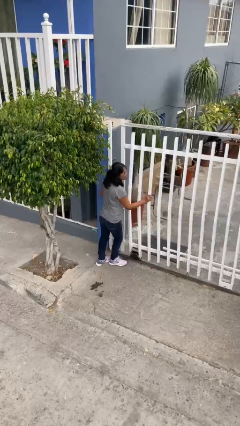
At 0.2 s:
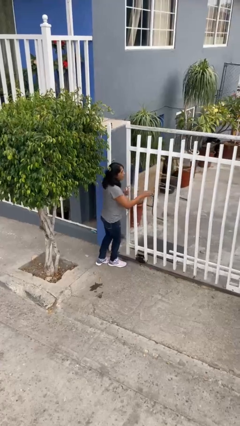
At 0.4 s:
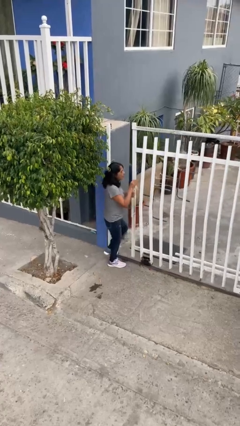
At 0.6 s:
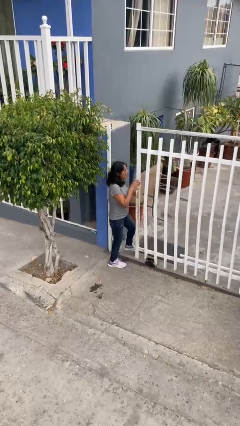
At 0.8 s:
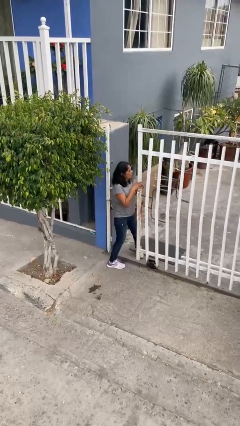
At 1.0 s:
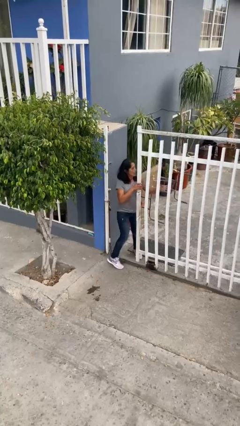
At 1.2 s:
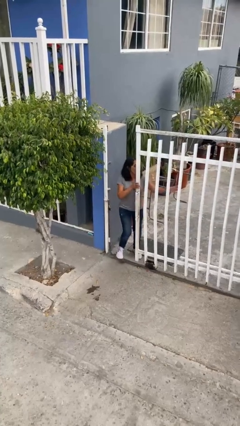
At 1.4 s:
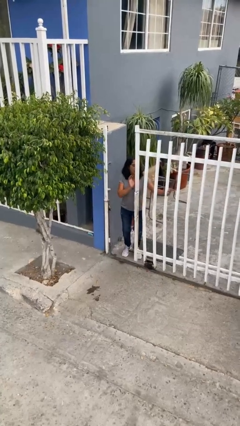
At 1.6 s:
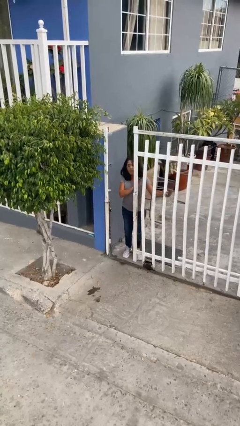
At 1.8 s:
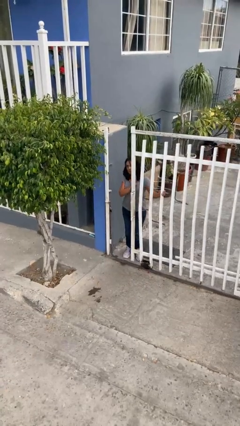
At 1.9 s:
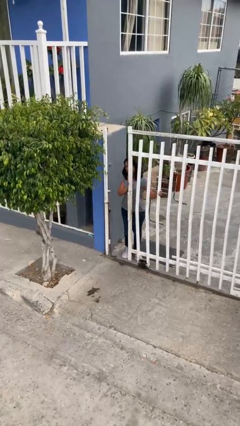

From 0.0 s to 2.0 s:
person opens facility door

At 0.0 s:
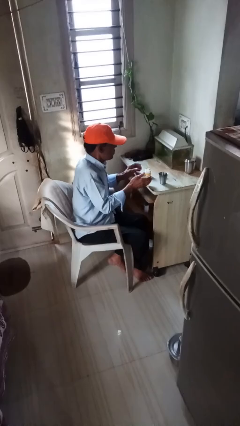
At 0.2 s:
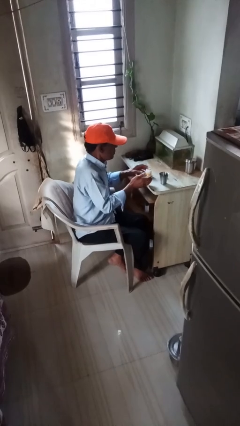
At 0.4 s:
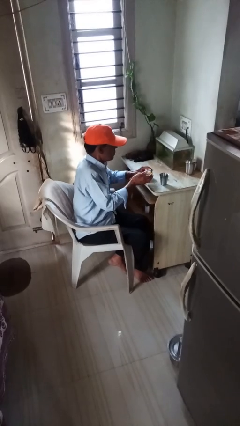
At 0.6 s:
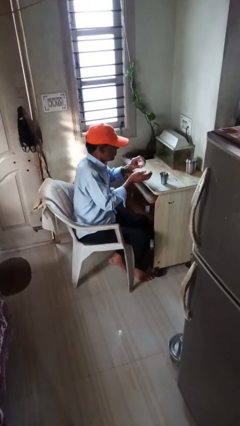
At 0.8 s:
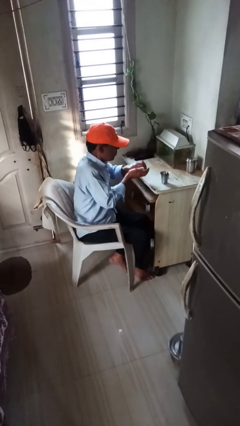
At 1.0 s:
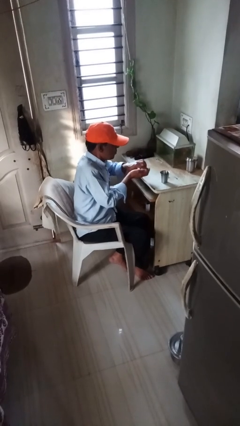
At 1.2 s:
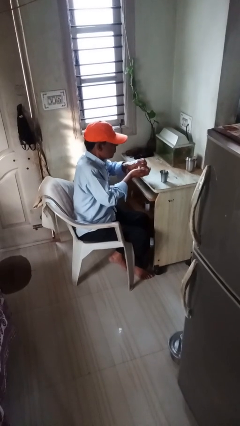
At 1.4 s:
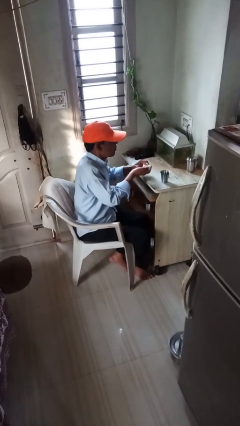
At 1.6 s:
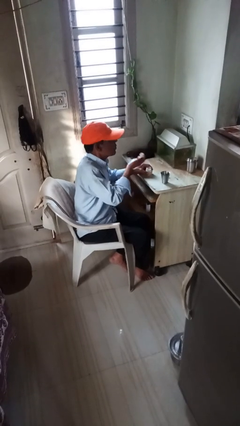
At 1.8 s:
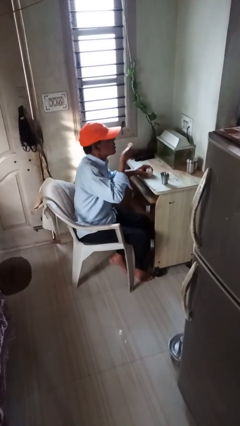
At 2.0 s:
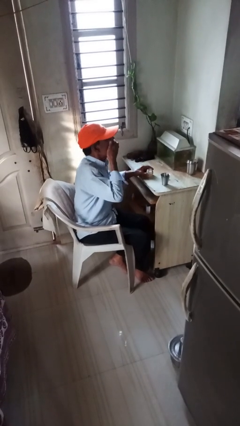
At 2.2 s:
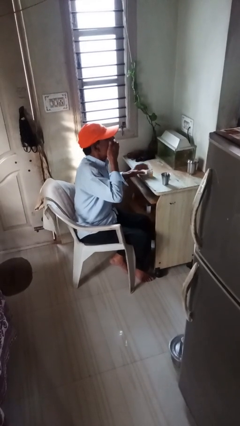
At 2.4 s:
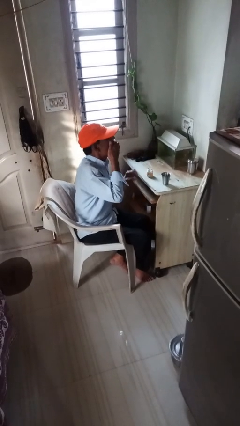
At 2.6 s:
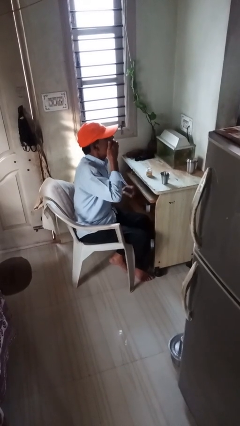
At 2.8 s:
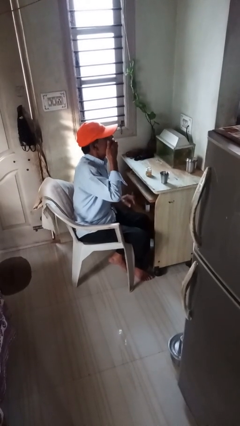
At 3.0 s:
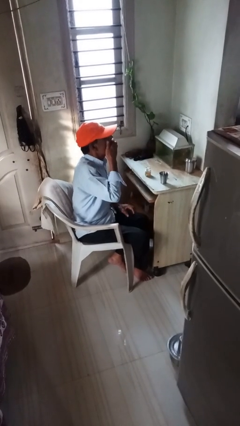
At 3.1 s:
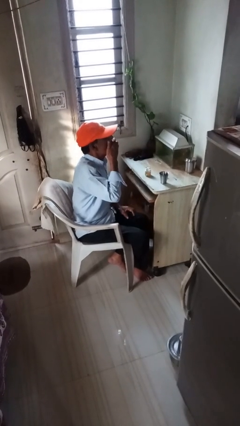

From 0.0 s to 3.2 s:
person takes medicine pills

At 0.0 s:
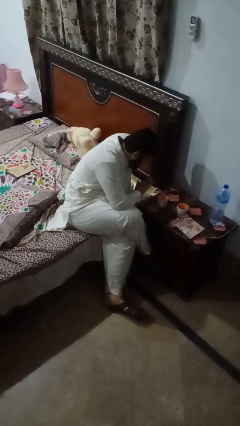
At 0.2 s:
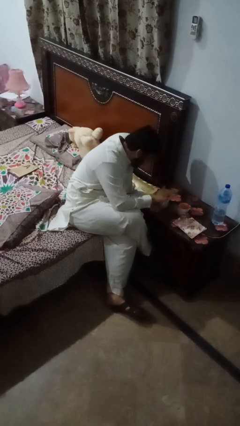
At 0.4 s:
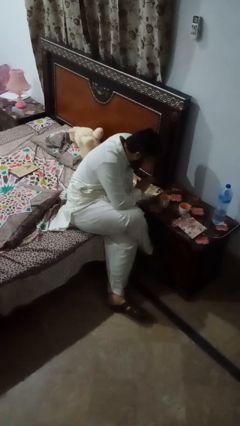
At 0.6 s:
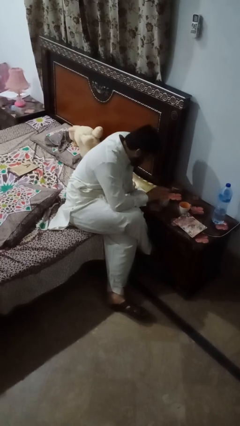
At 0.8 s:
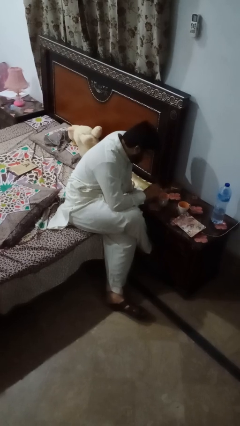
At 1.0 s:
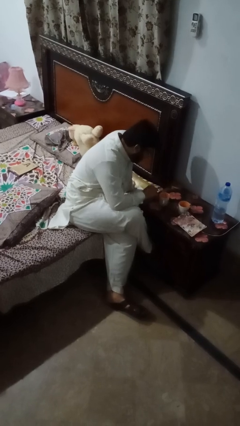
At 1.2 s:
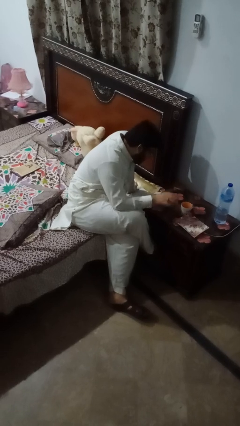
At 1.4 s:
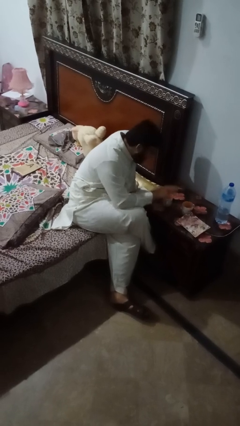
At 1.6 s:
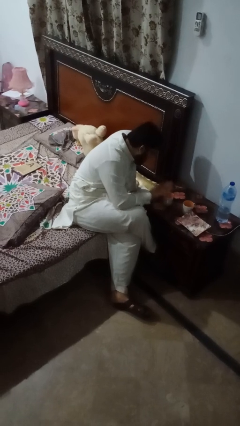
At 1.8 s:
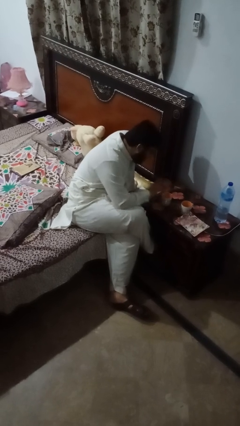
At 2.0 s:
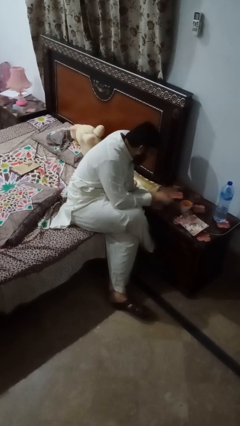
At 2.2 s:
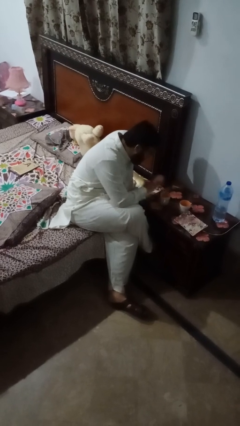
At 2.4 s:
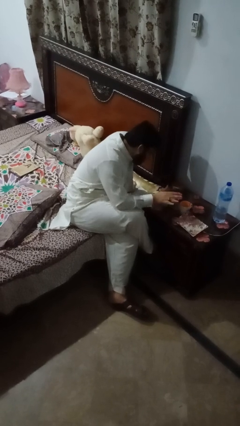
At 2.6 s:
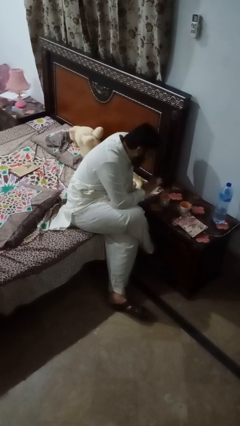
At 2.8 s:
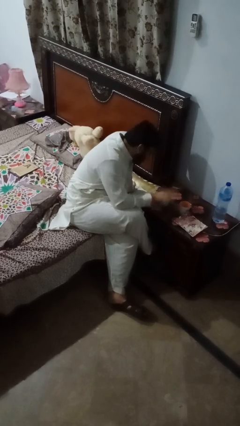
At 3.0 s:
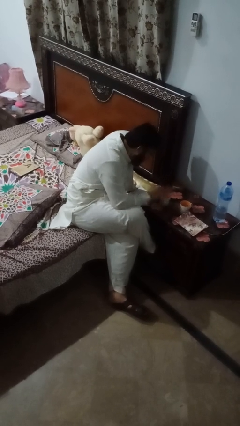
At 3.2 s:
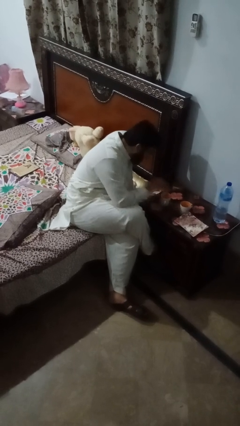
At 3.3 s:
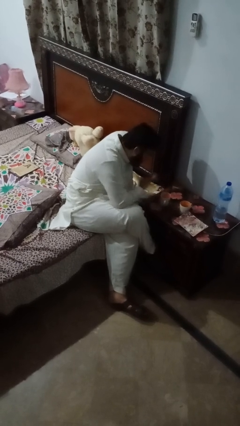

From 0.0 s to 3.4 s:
person waves hand over object

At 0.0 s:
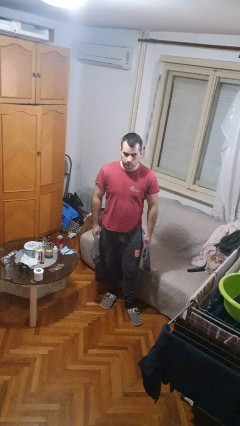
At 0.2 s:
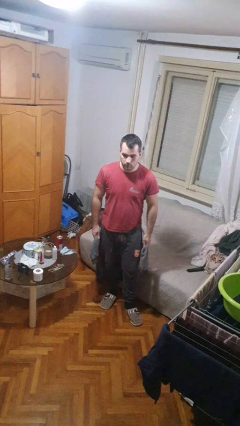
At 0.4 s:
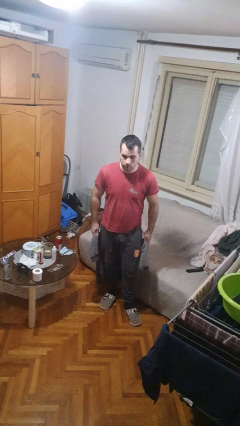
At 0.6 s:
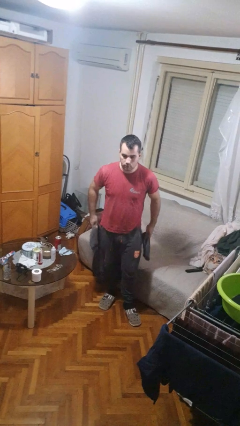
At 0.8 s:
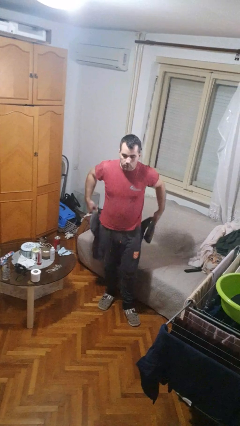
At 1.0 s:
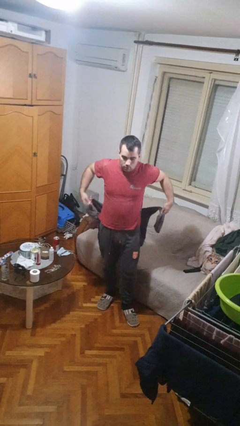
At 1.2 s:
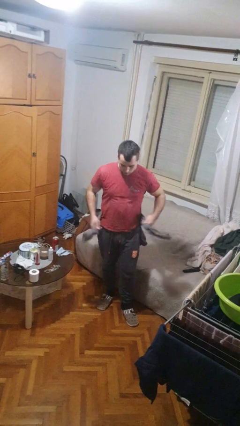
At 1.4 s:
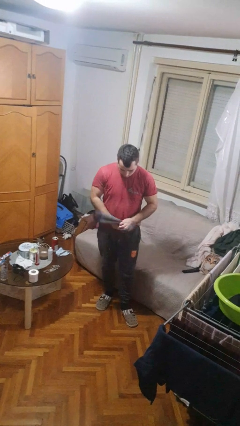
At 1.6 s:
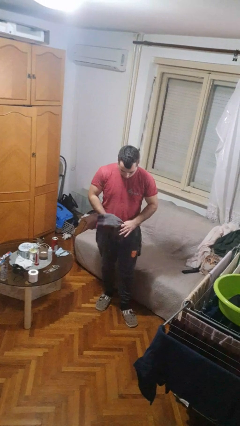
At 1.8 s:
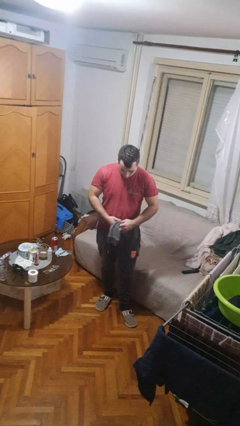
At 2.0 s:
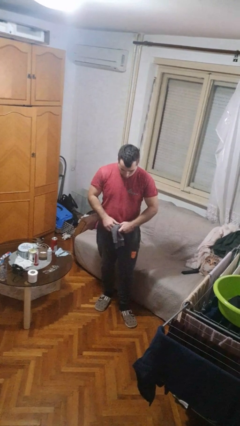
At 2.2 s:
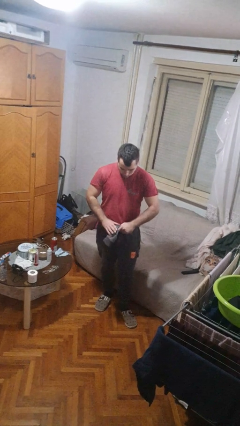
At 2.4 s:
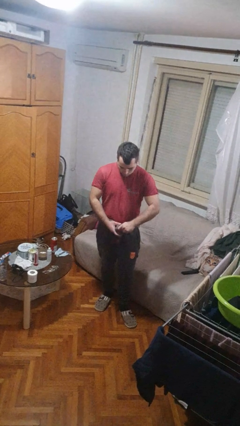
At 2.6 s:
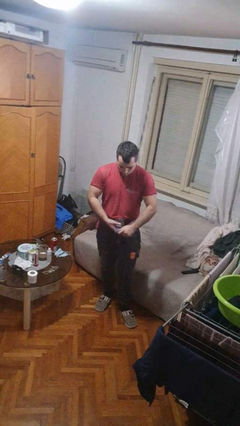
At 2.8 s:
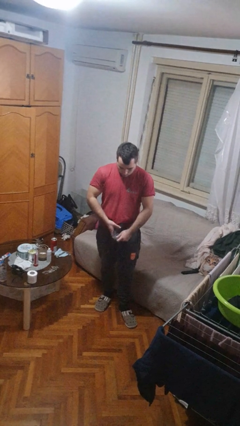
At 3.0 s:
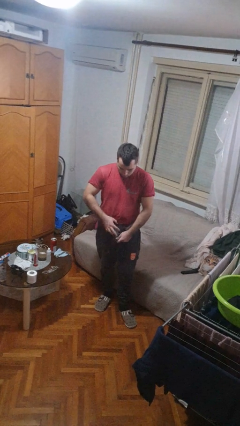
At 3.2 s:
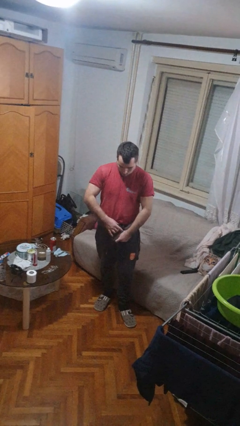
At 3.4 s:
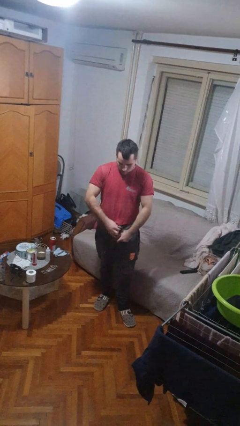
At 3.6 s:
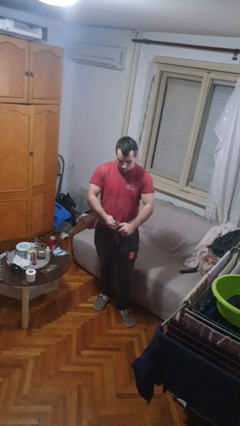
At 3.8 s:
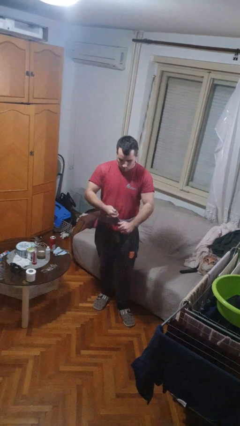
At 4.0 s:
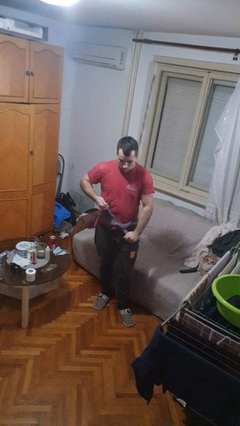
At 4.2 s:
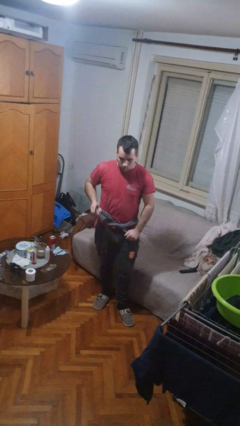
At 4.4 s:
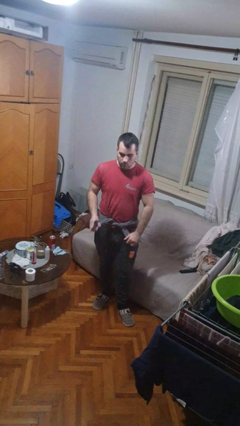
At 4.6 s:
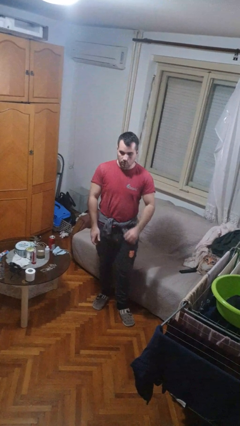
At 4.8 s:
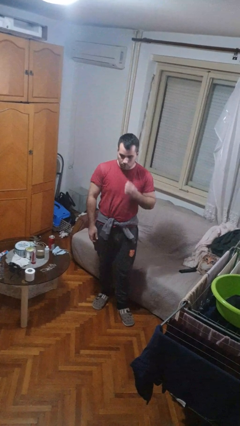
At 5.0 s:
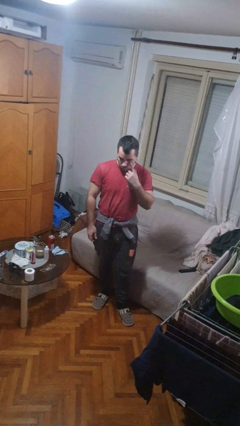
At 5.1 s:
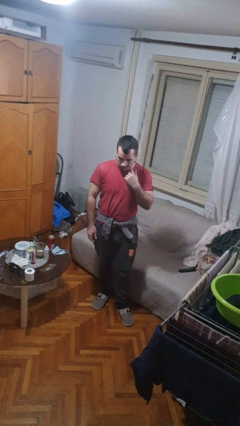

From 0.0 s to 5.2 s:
person ties jacket around waist

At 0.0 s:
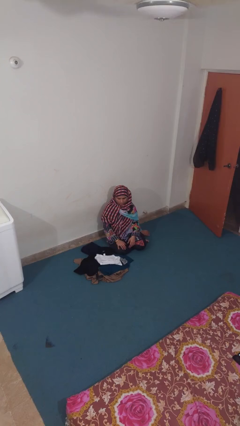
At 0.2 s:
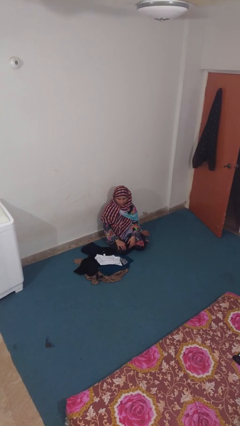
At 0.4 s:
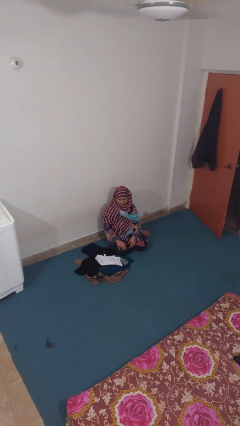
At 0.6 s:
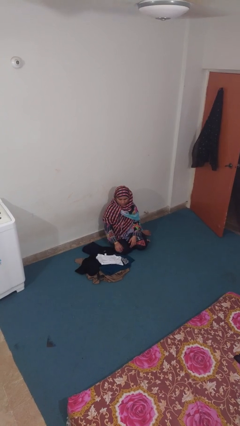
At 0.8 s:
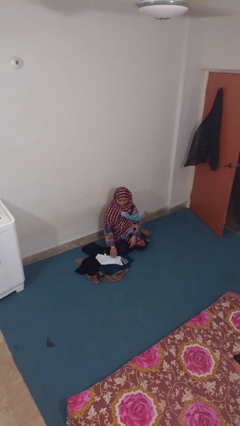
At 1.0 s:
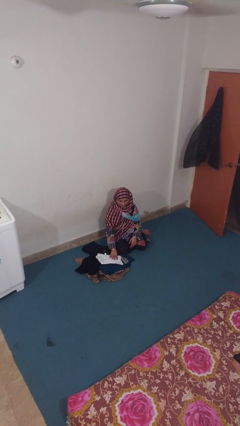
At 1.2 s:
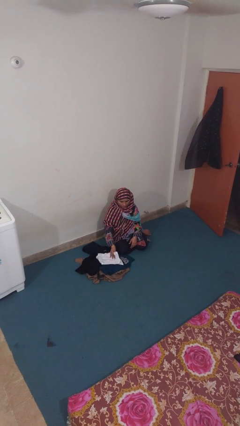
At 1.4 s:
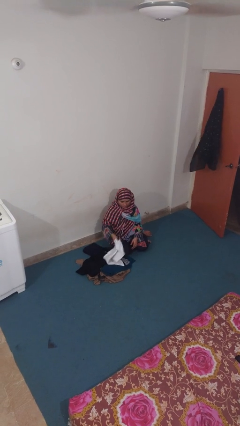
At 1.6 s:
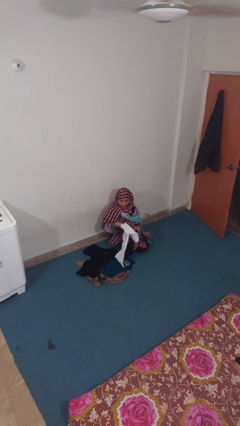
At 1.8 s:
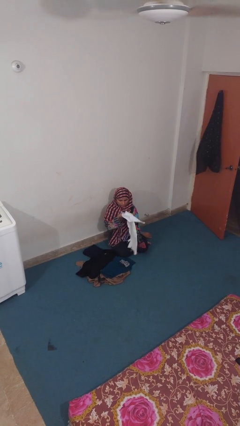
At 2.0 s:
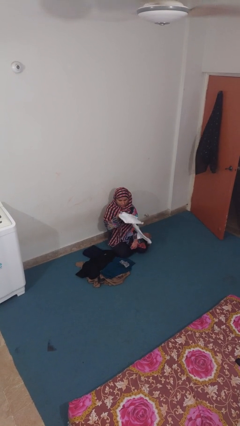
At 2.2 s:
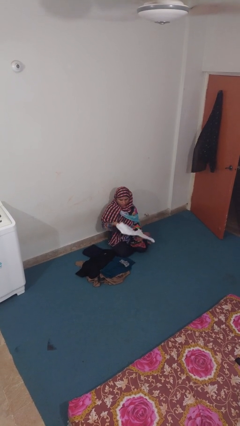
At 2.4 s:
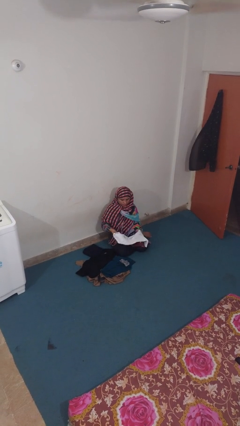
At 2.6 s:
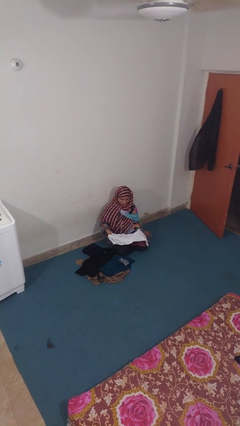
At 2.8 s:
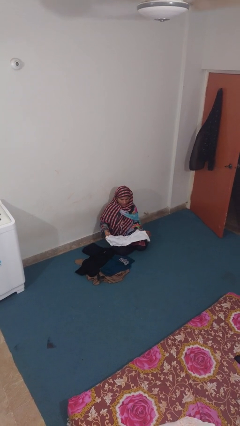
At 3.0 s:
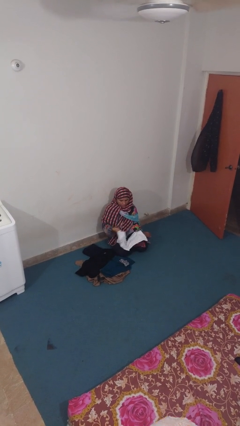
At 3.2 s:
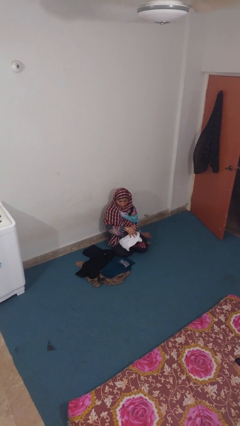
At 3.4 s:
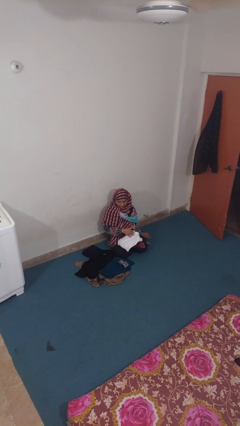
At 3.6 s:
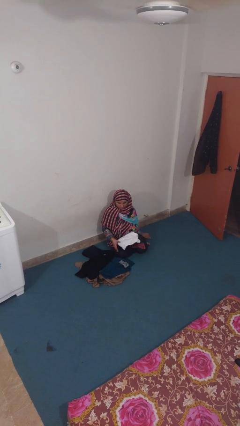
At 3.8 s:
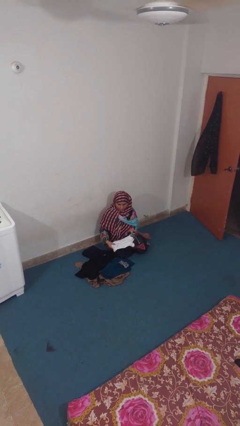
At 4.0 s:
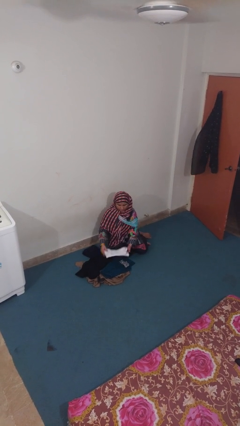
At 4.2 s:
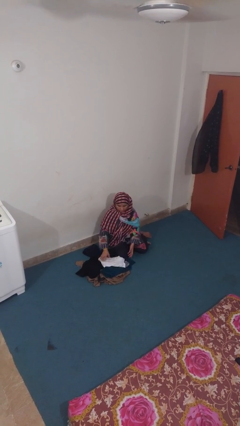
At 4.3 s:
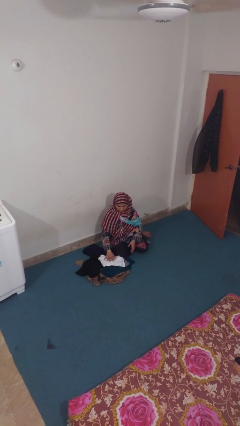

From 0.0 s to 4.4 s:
person folds shirt
